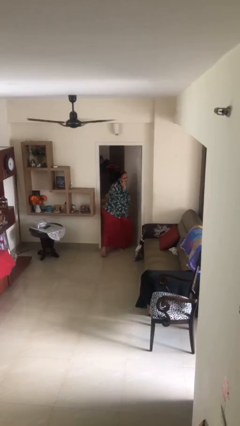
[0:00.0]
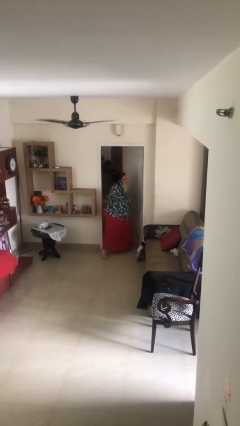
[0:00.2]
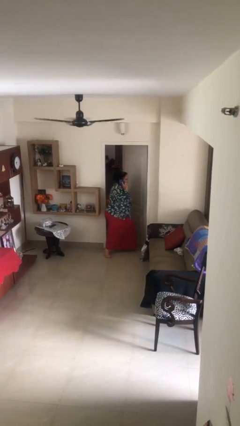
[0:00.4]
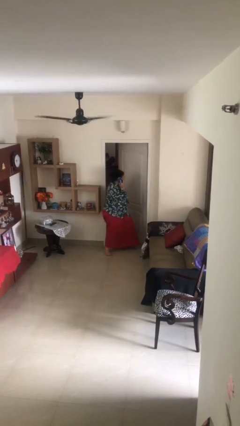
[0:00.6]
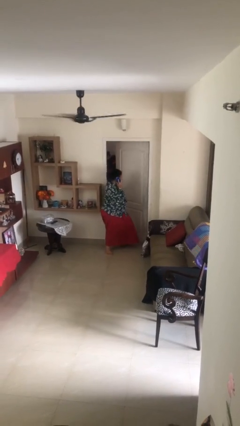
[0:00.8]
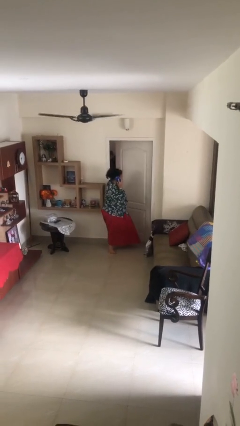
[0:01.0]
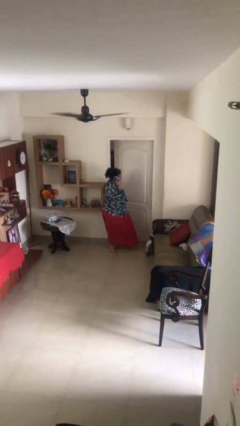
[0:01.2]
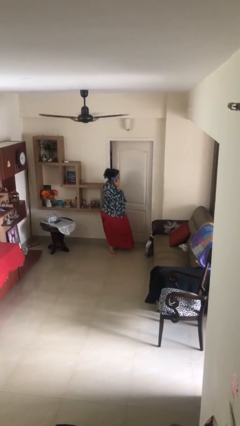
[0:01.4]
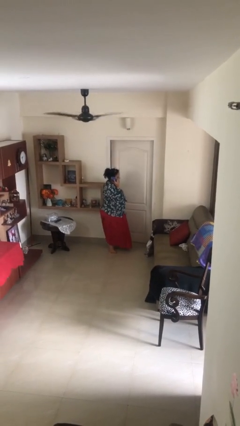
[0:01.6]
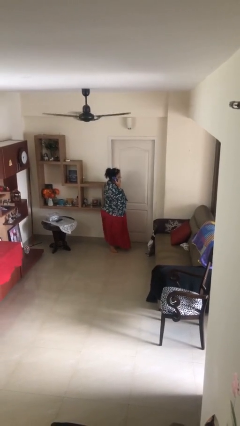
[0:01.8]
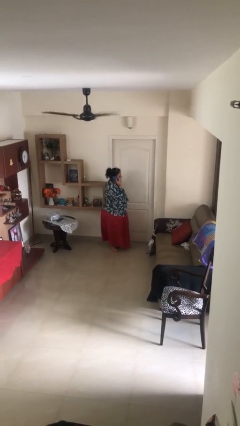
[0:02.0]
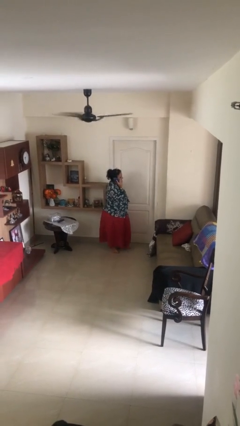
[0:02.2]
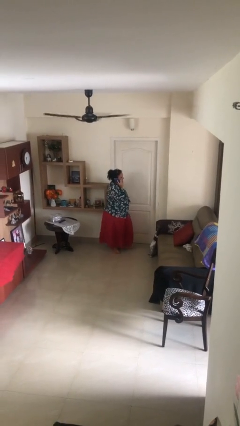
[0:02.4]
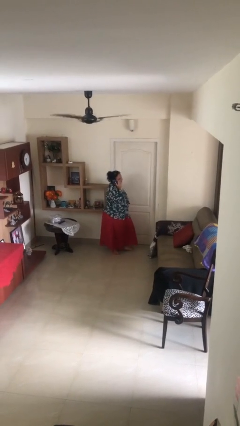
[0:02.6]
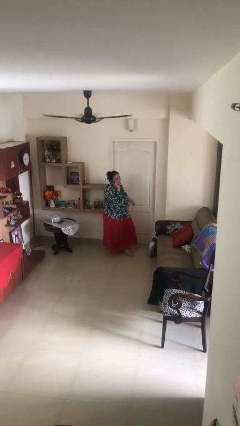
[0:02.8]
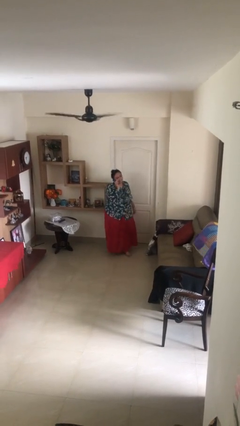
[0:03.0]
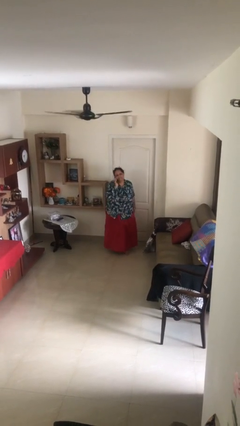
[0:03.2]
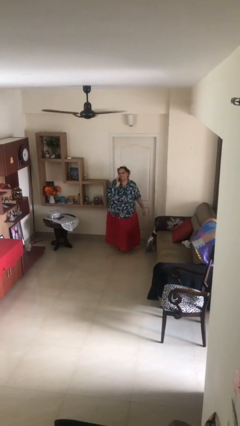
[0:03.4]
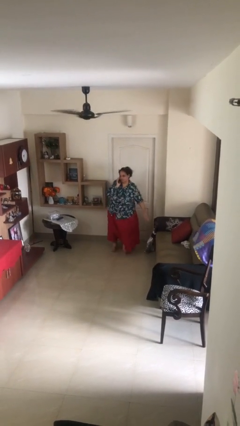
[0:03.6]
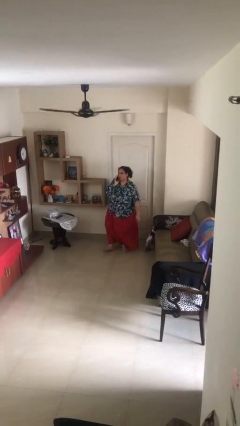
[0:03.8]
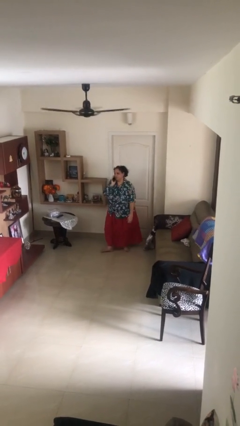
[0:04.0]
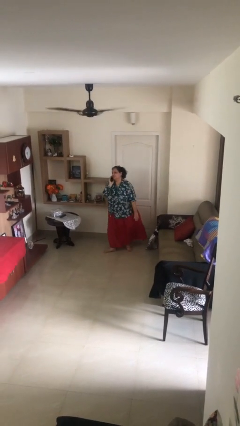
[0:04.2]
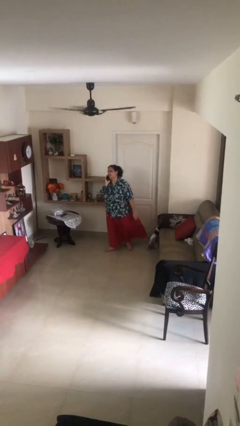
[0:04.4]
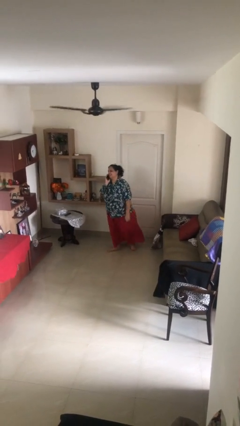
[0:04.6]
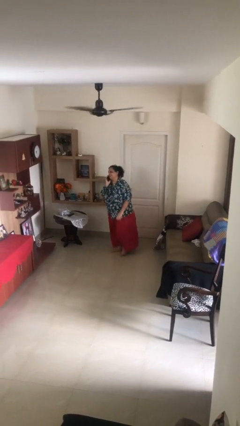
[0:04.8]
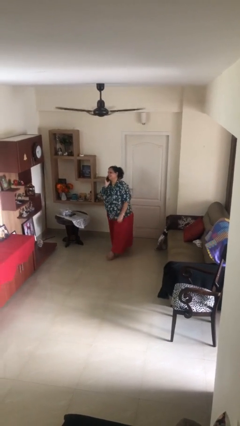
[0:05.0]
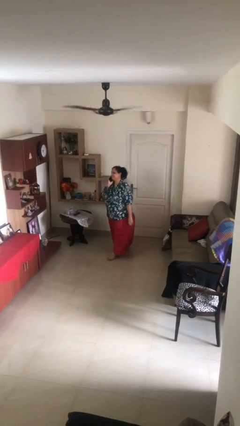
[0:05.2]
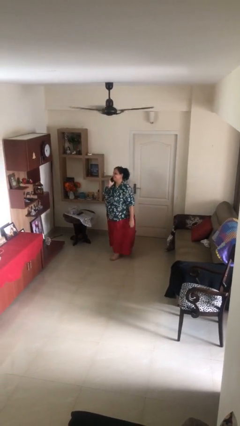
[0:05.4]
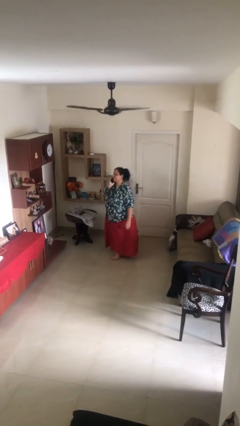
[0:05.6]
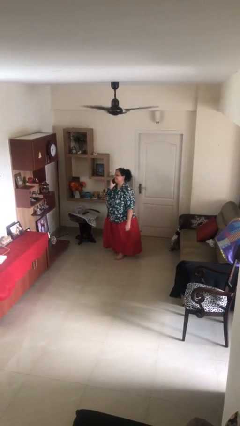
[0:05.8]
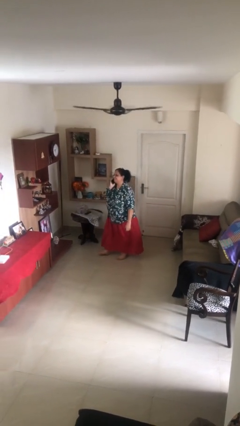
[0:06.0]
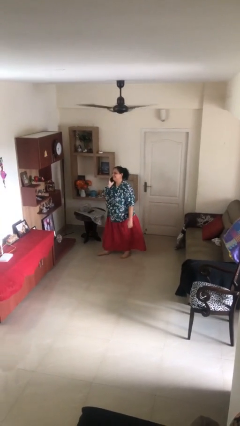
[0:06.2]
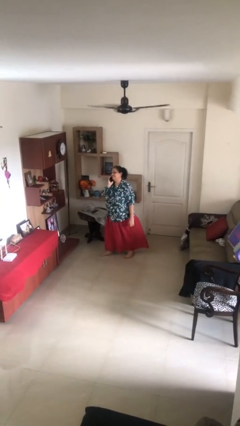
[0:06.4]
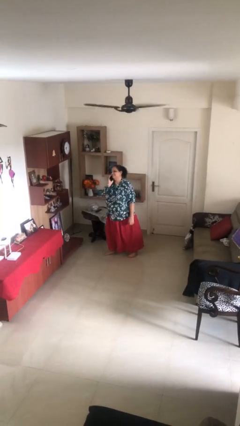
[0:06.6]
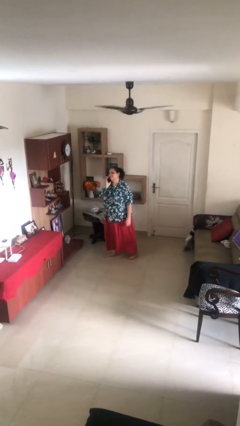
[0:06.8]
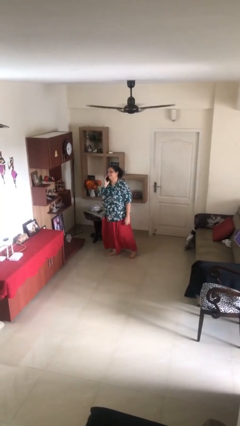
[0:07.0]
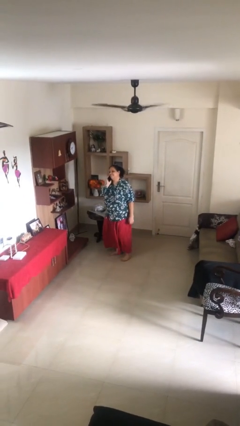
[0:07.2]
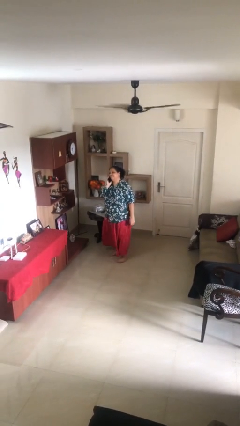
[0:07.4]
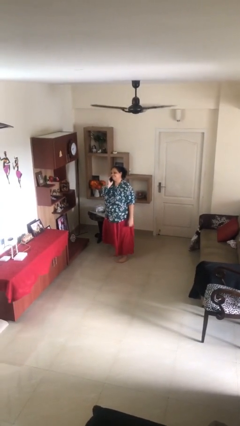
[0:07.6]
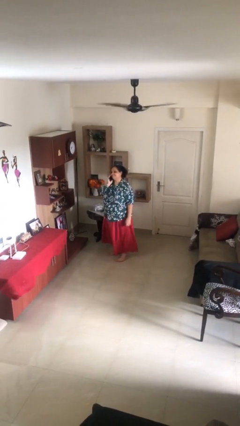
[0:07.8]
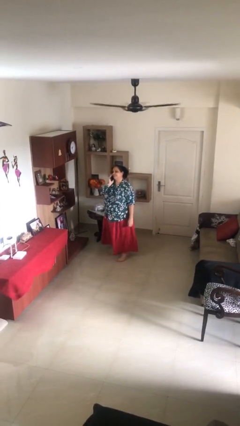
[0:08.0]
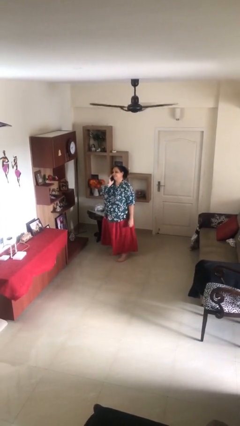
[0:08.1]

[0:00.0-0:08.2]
person closes facility door

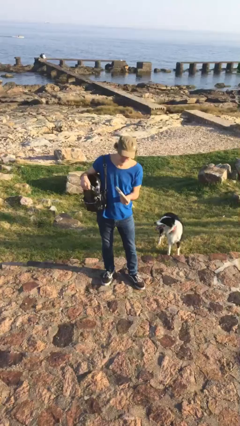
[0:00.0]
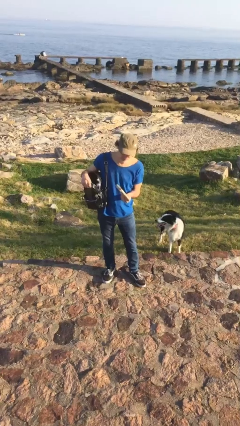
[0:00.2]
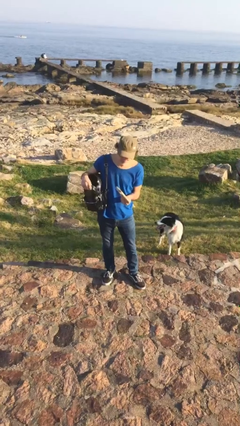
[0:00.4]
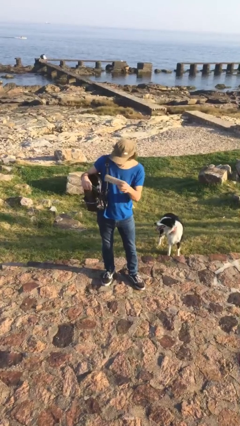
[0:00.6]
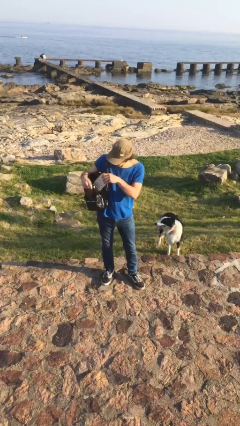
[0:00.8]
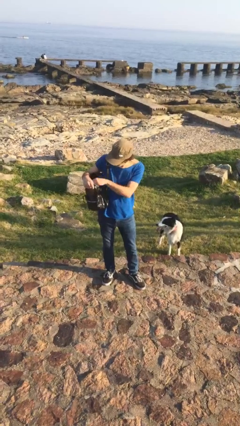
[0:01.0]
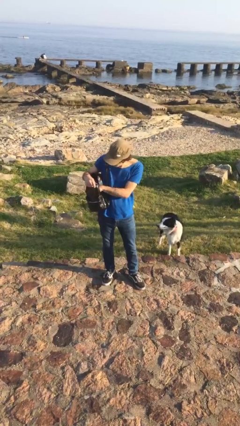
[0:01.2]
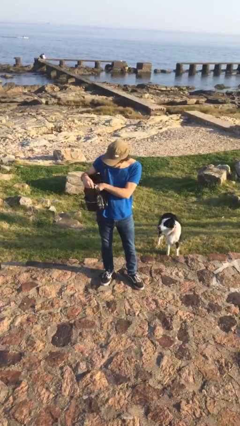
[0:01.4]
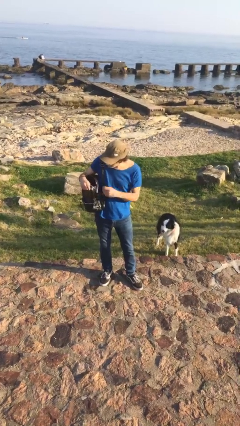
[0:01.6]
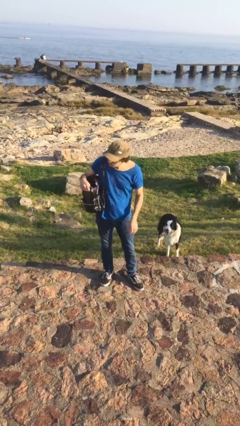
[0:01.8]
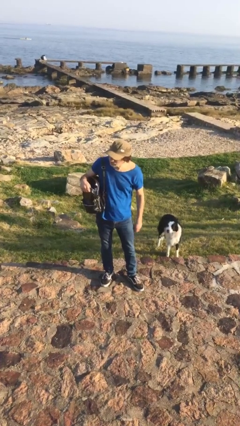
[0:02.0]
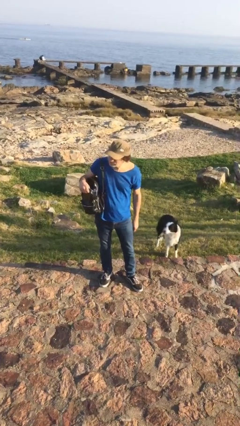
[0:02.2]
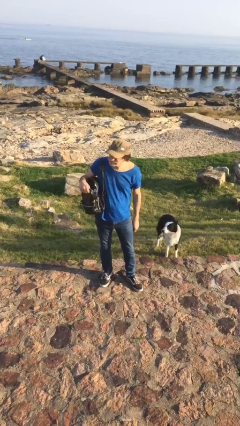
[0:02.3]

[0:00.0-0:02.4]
person puts object into purse

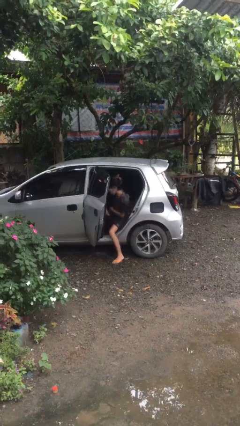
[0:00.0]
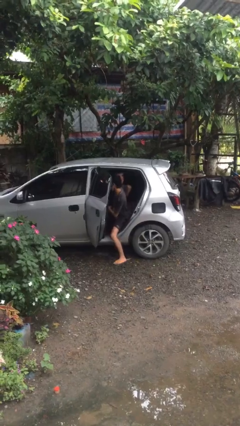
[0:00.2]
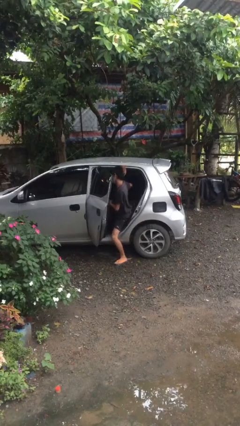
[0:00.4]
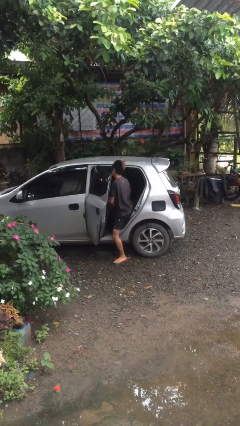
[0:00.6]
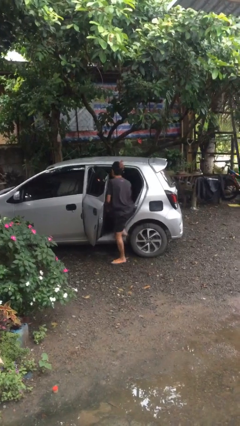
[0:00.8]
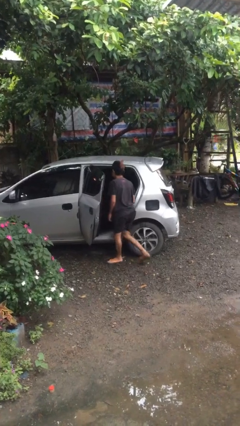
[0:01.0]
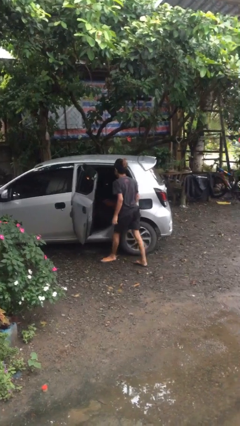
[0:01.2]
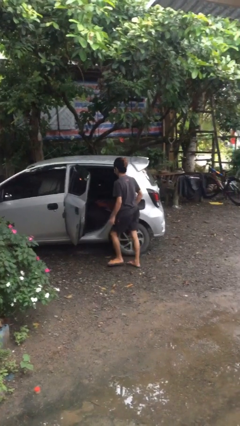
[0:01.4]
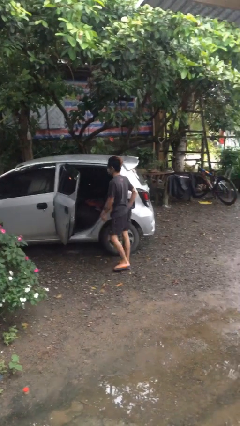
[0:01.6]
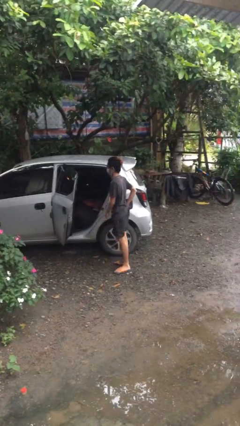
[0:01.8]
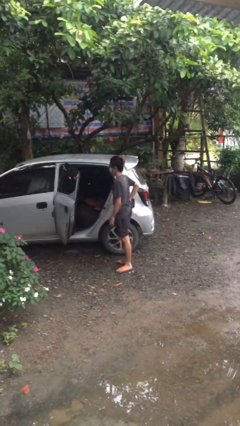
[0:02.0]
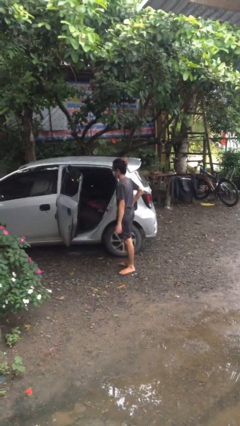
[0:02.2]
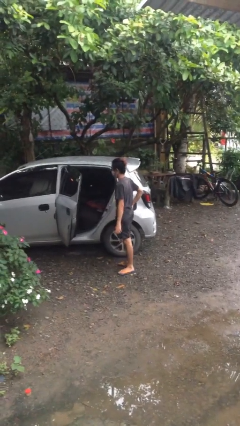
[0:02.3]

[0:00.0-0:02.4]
person exits car

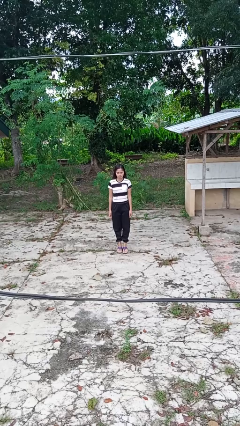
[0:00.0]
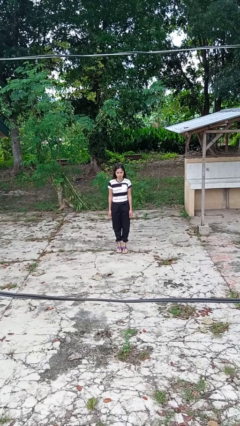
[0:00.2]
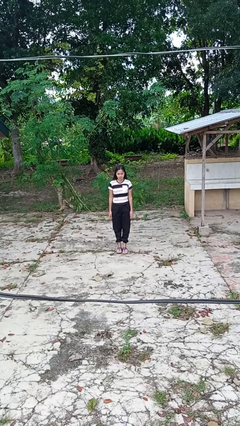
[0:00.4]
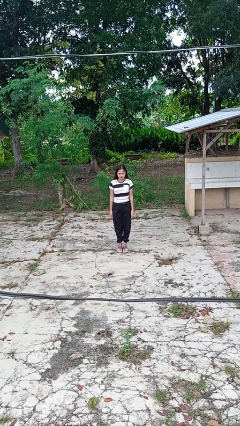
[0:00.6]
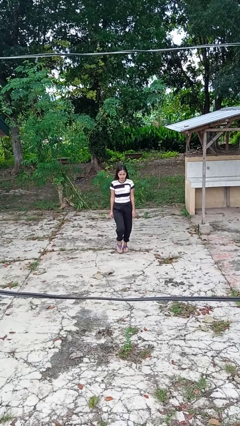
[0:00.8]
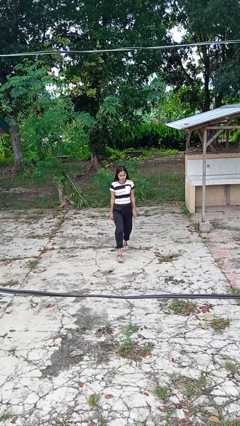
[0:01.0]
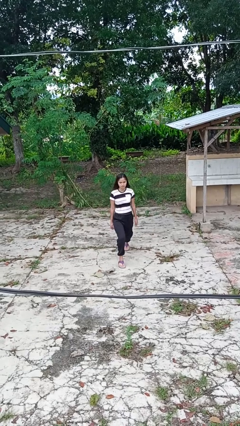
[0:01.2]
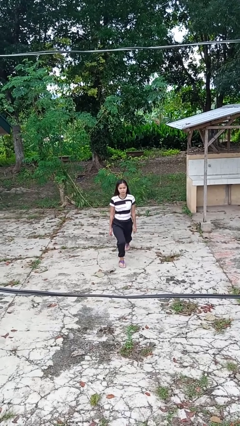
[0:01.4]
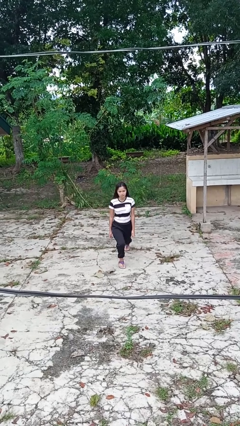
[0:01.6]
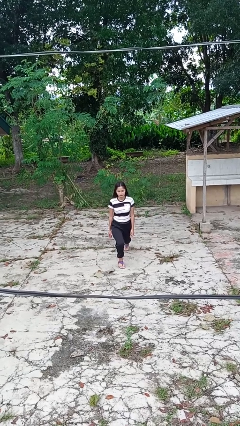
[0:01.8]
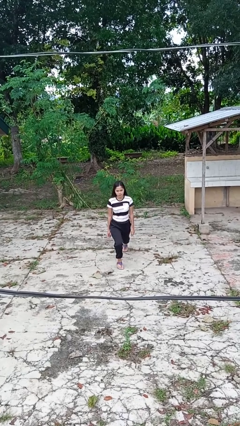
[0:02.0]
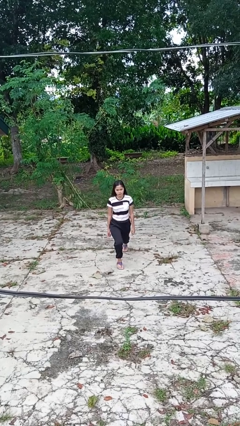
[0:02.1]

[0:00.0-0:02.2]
person exercises with lunges

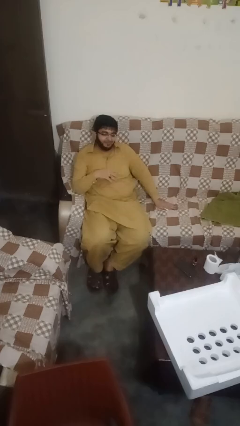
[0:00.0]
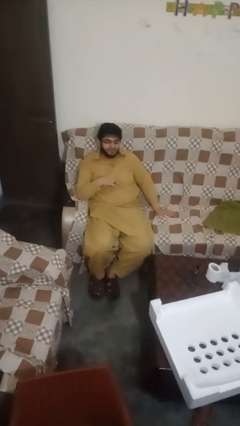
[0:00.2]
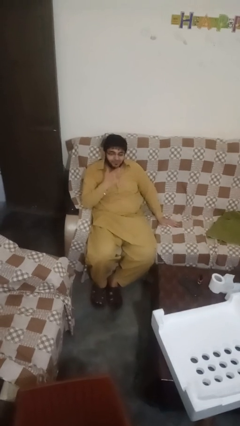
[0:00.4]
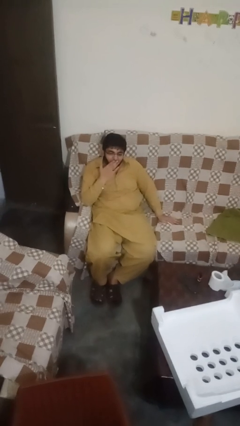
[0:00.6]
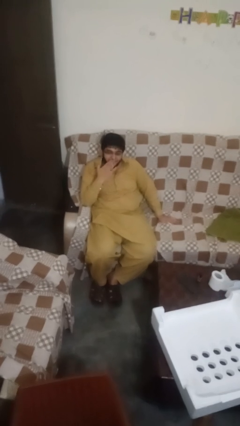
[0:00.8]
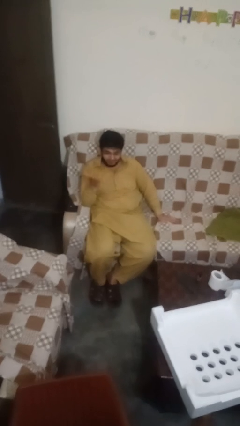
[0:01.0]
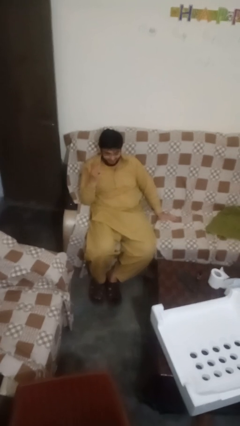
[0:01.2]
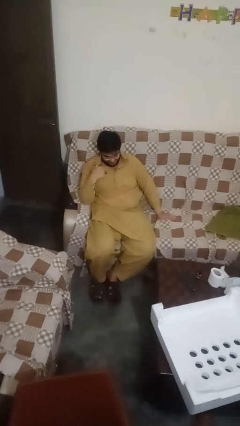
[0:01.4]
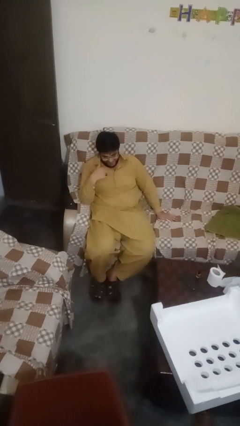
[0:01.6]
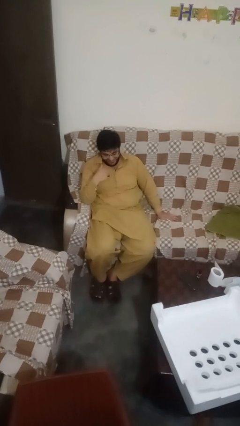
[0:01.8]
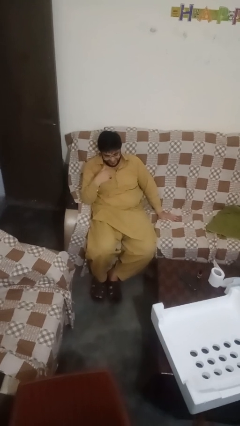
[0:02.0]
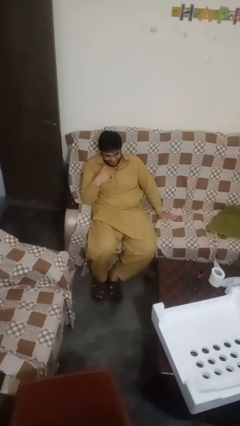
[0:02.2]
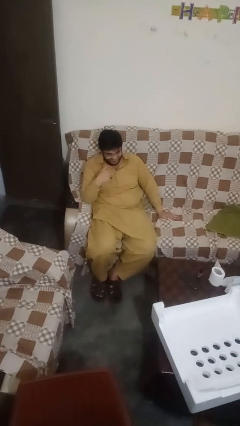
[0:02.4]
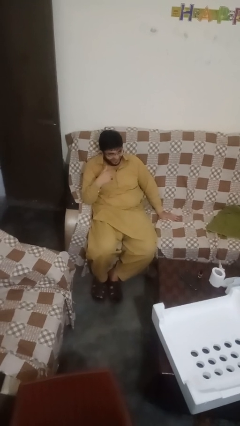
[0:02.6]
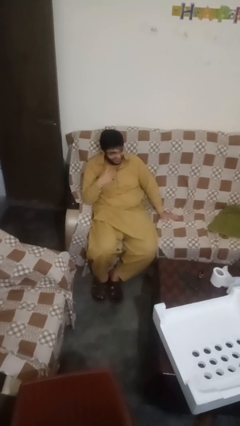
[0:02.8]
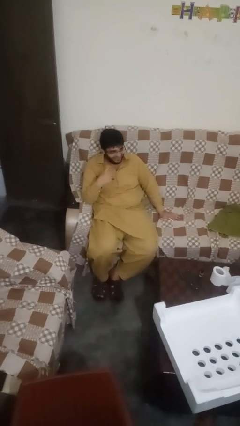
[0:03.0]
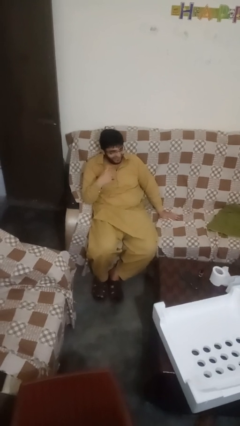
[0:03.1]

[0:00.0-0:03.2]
person gestures blow kiss
